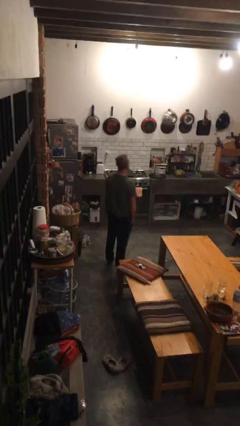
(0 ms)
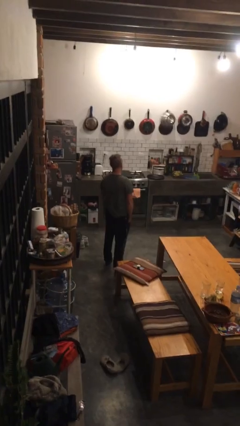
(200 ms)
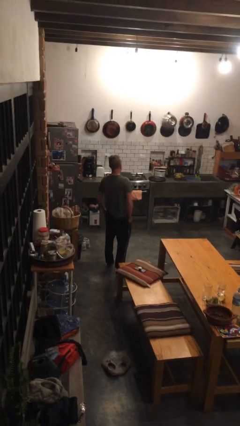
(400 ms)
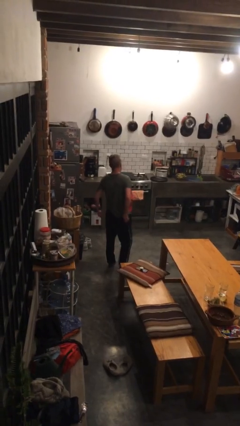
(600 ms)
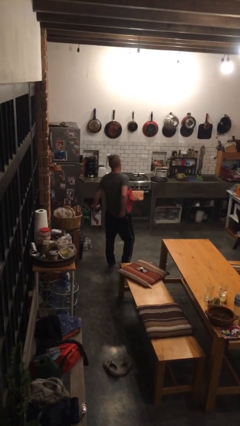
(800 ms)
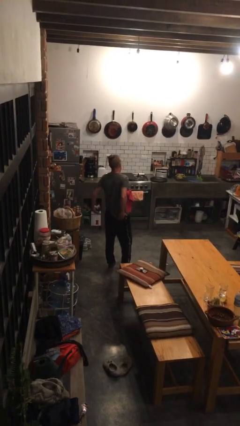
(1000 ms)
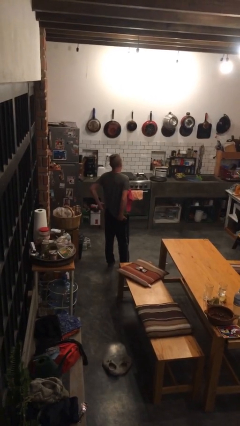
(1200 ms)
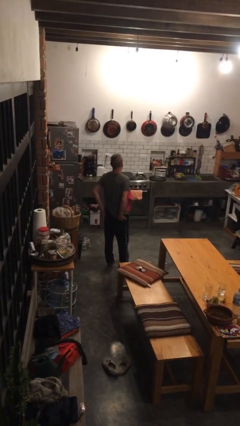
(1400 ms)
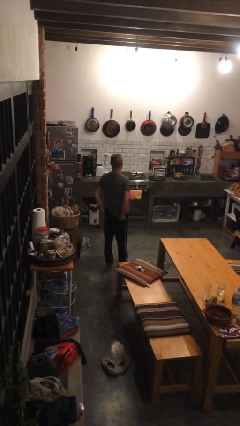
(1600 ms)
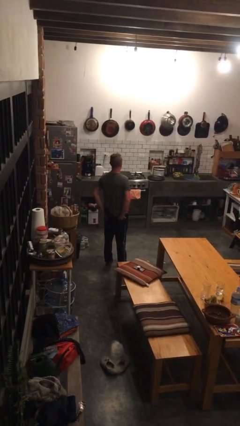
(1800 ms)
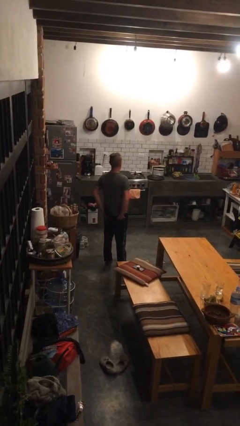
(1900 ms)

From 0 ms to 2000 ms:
person puts hands in back pockets

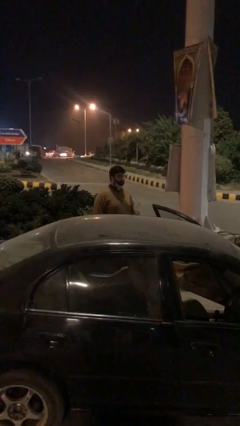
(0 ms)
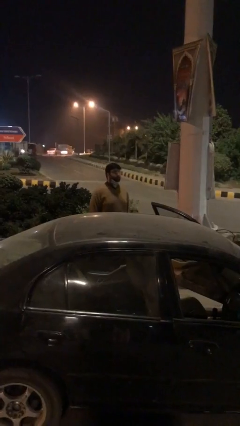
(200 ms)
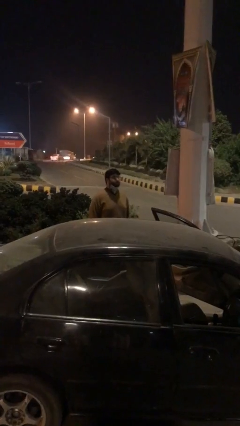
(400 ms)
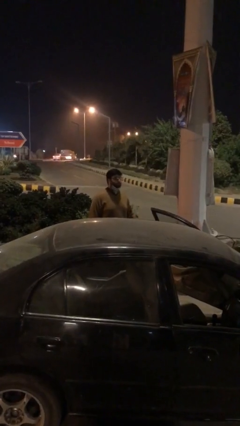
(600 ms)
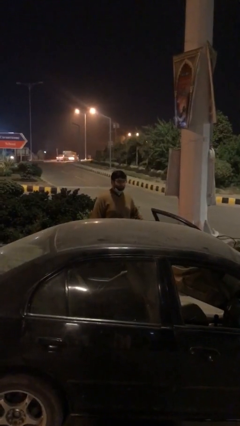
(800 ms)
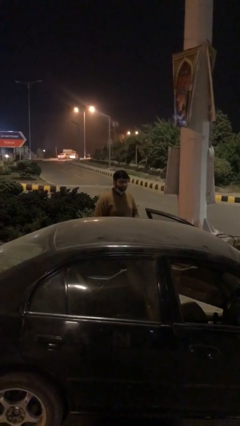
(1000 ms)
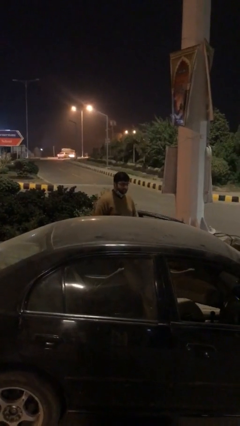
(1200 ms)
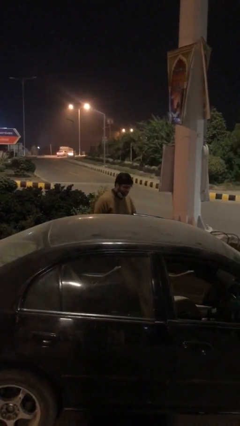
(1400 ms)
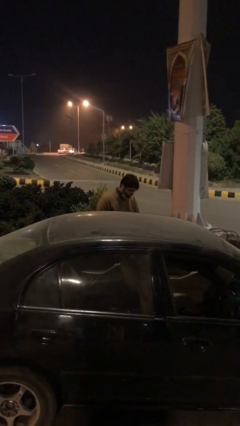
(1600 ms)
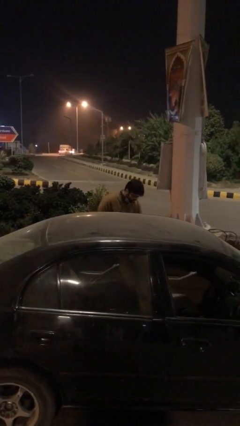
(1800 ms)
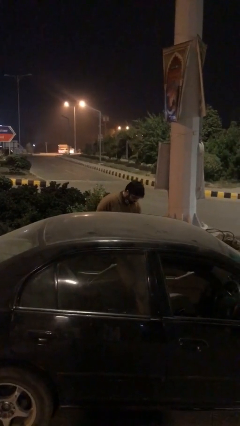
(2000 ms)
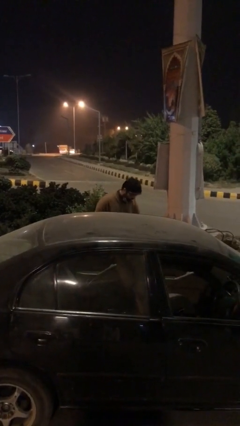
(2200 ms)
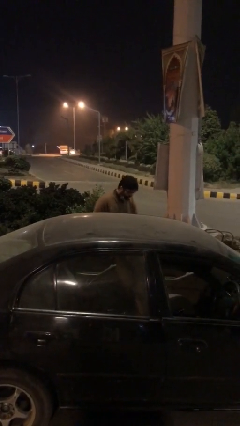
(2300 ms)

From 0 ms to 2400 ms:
person closes car door

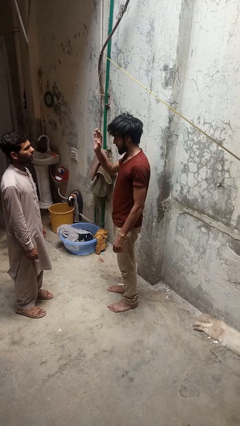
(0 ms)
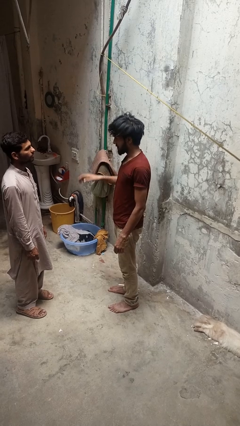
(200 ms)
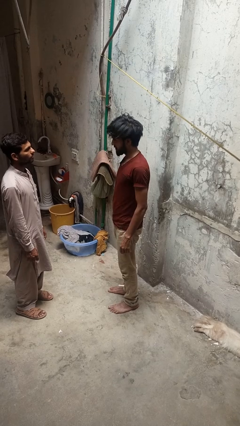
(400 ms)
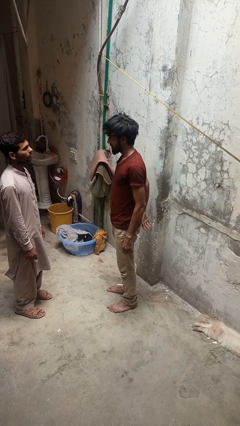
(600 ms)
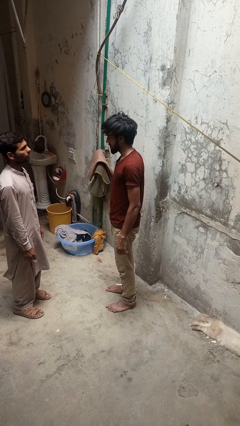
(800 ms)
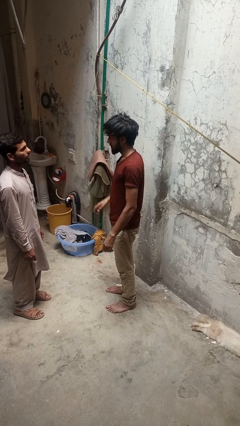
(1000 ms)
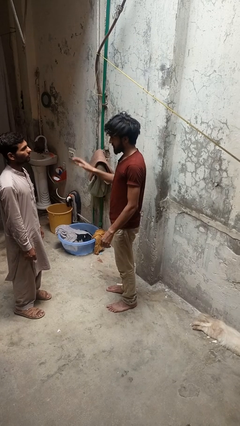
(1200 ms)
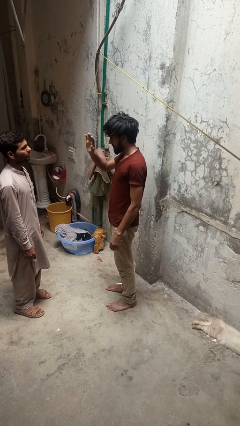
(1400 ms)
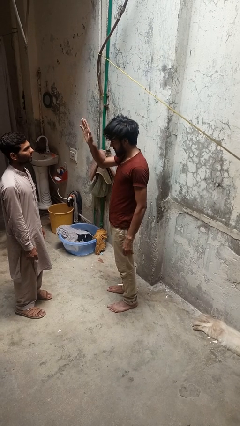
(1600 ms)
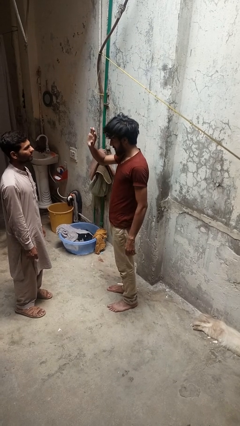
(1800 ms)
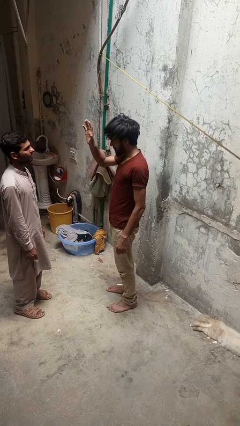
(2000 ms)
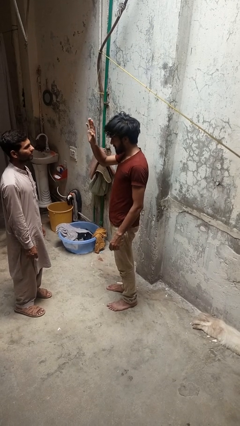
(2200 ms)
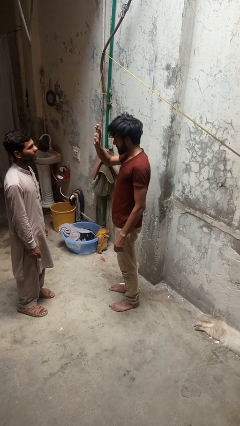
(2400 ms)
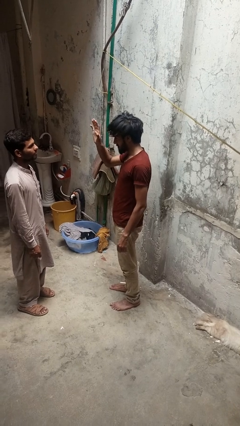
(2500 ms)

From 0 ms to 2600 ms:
person waves at person

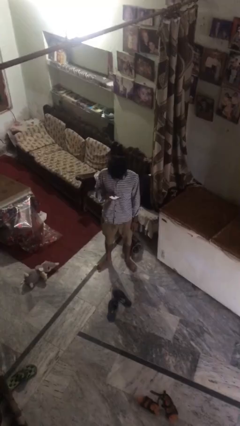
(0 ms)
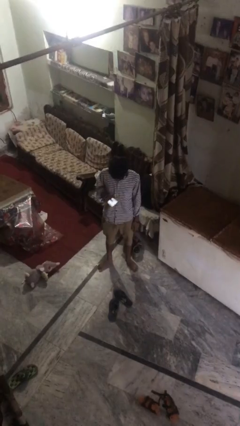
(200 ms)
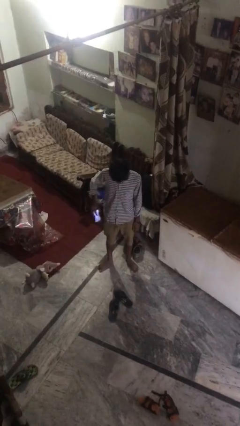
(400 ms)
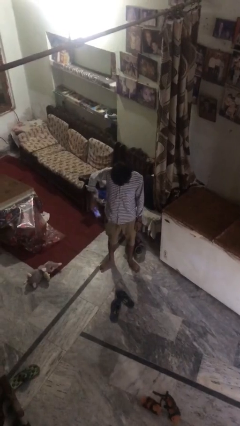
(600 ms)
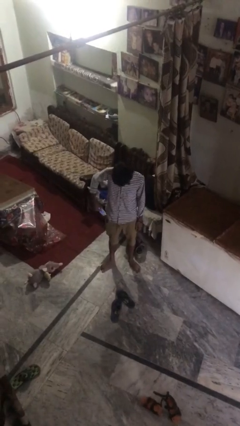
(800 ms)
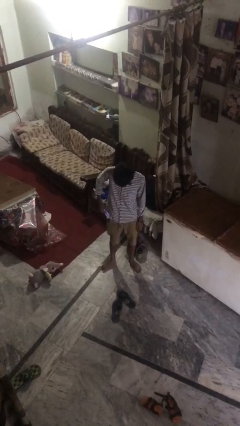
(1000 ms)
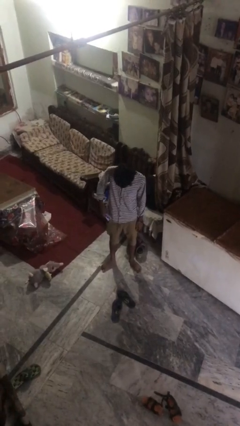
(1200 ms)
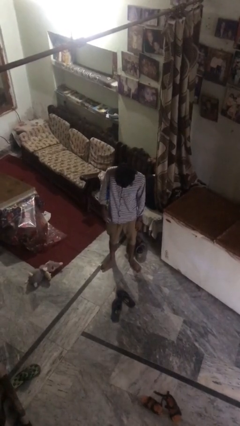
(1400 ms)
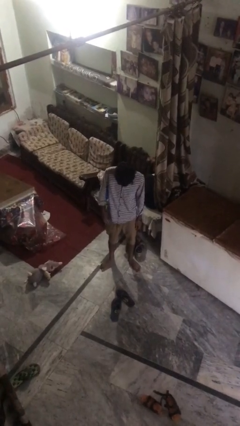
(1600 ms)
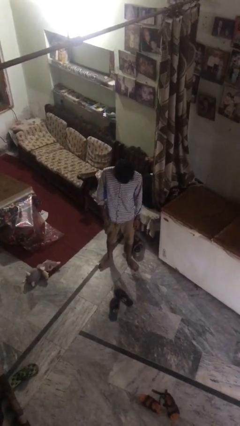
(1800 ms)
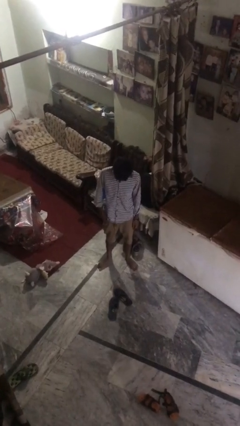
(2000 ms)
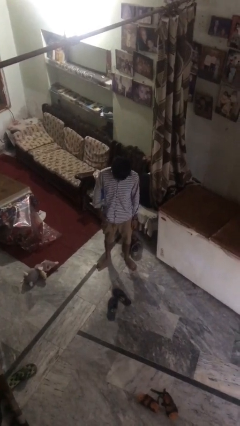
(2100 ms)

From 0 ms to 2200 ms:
person puts phone into pocket

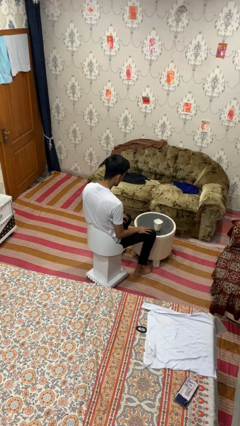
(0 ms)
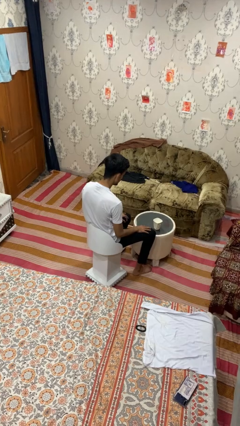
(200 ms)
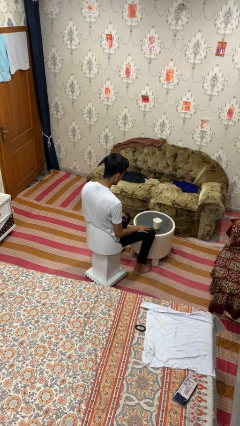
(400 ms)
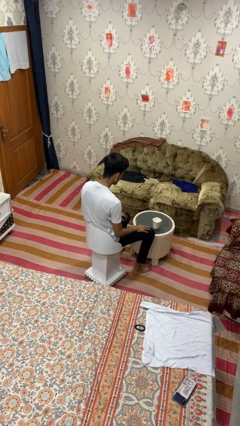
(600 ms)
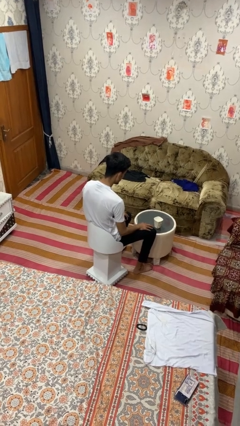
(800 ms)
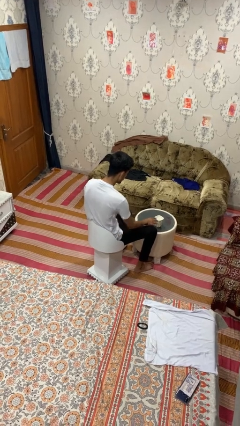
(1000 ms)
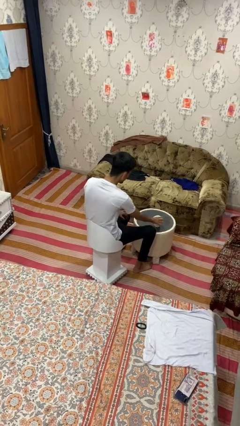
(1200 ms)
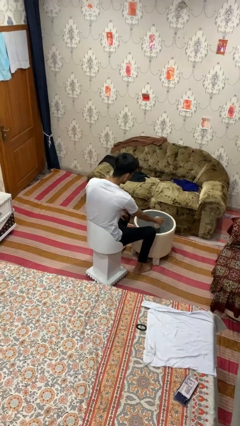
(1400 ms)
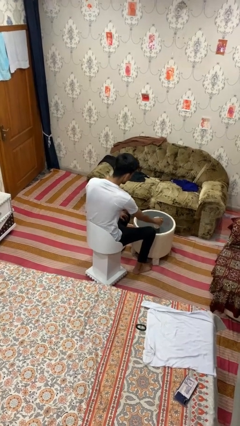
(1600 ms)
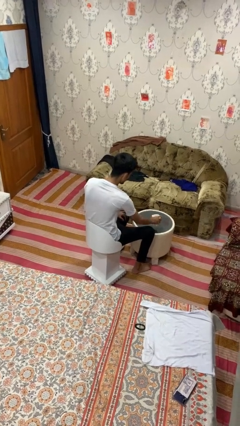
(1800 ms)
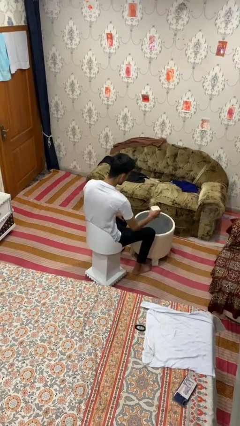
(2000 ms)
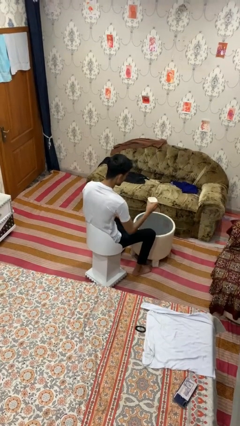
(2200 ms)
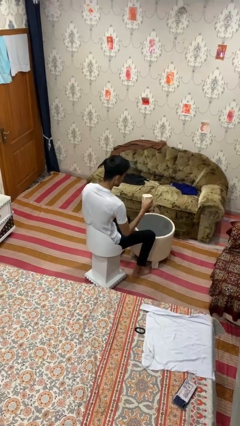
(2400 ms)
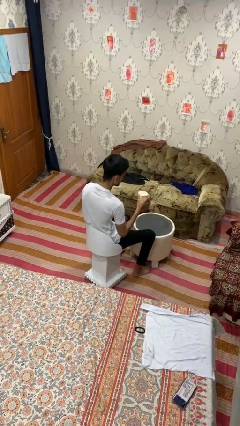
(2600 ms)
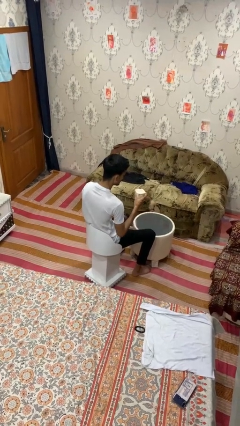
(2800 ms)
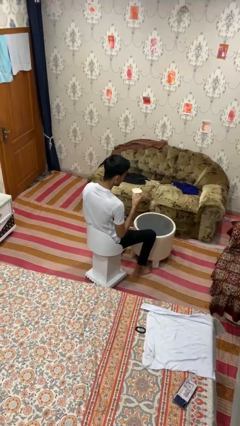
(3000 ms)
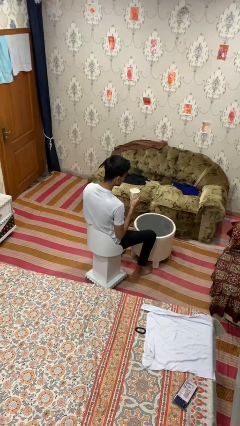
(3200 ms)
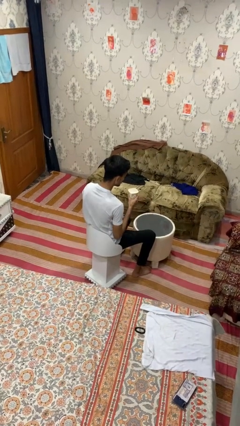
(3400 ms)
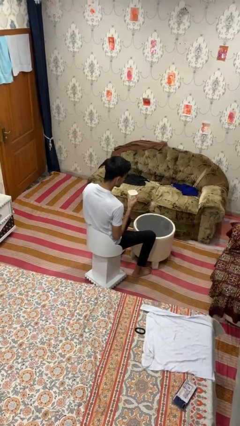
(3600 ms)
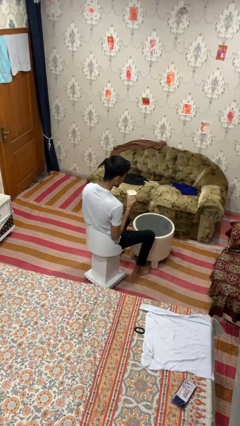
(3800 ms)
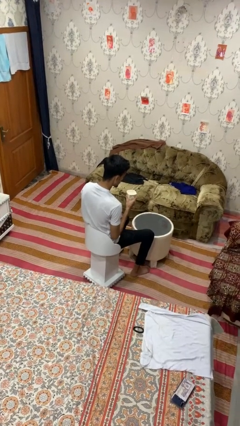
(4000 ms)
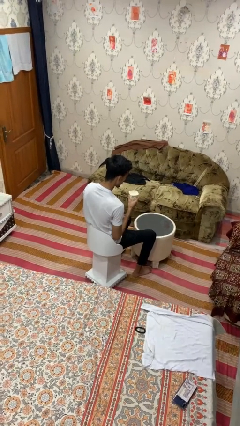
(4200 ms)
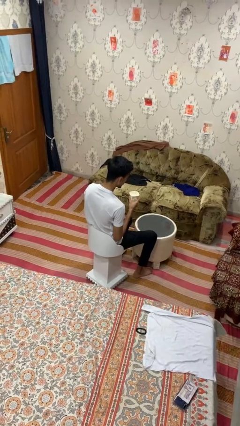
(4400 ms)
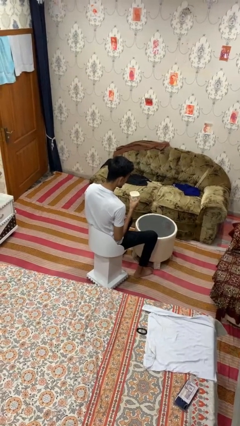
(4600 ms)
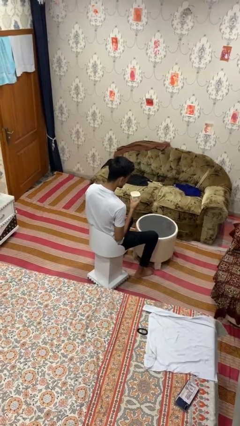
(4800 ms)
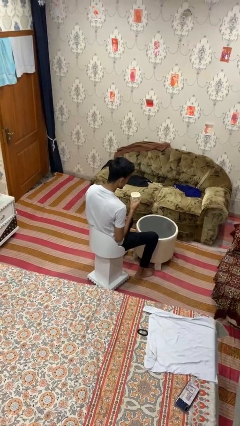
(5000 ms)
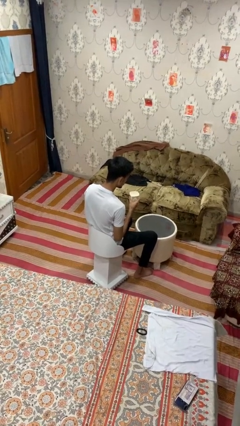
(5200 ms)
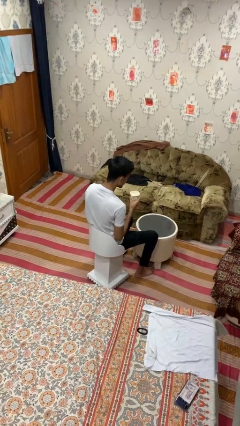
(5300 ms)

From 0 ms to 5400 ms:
person picks up object from table

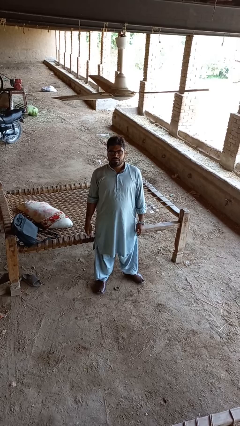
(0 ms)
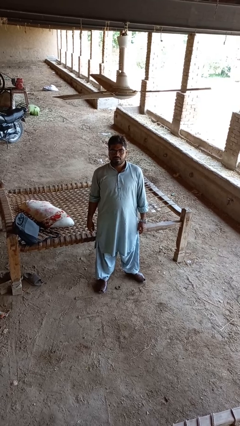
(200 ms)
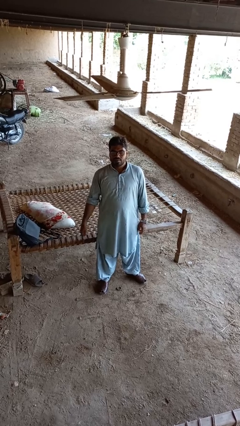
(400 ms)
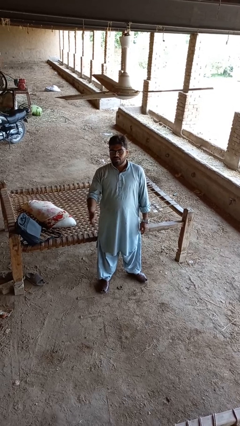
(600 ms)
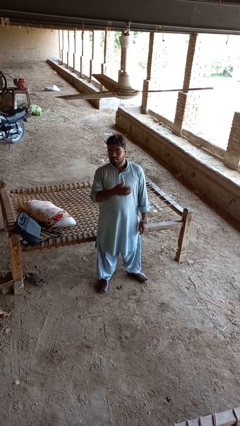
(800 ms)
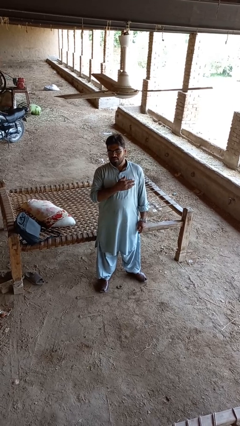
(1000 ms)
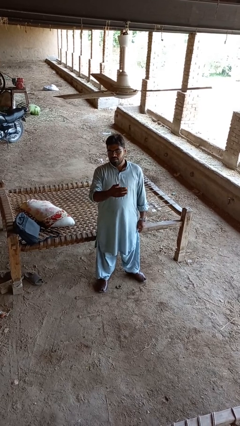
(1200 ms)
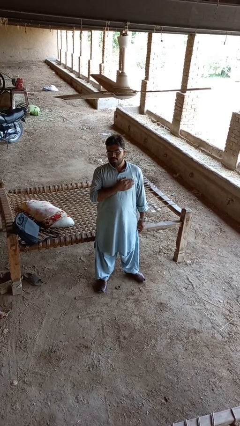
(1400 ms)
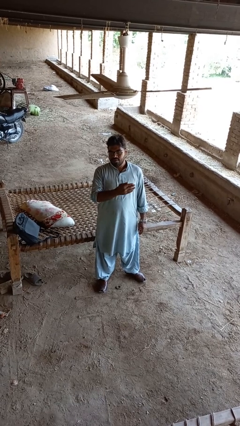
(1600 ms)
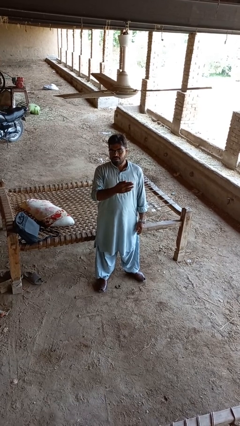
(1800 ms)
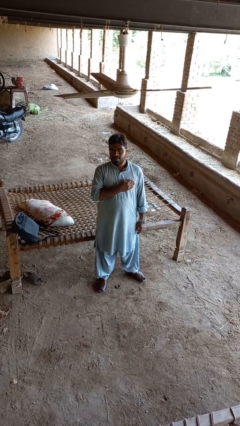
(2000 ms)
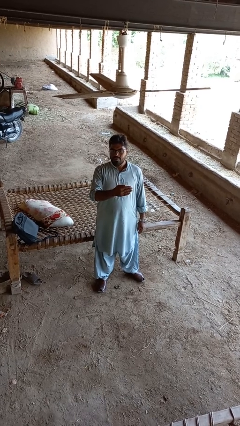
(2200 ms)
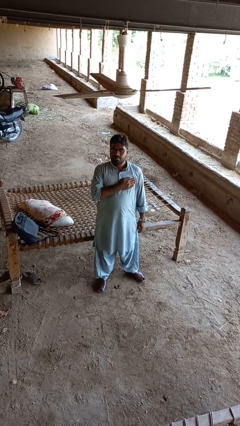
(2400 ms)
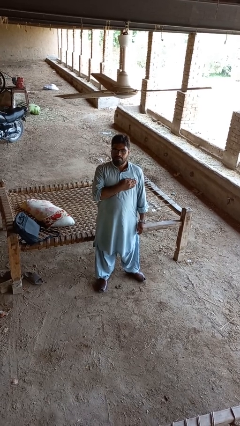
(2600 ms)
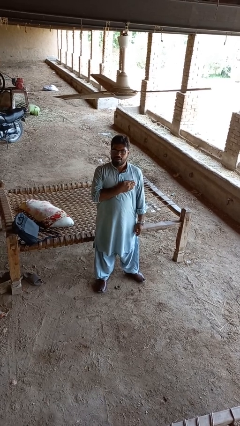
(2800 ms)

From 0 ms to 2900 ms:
person drums on chest
